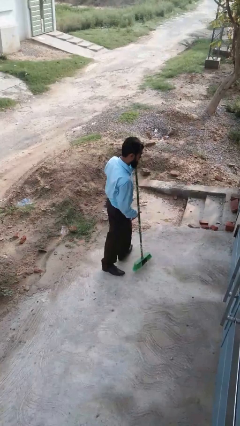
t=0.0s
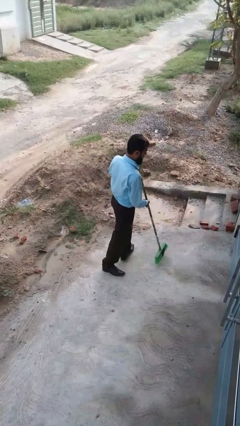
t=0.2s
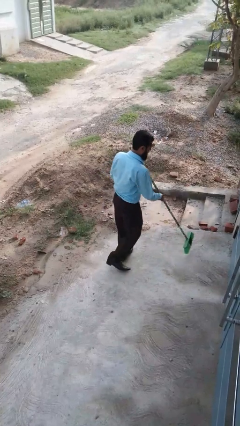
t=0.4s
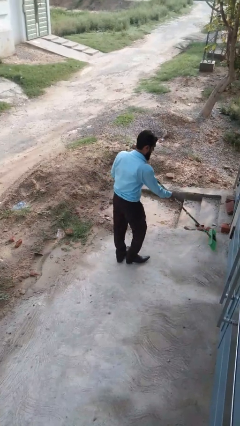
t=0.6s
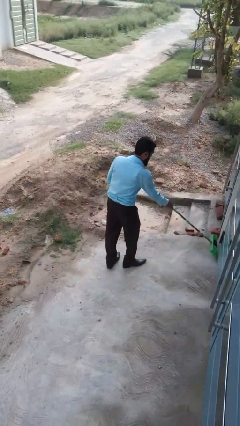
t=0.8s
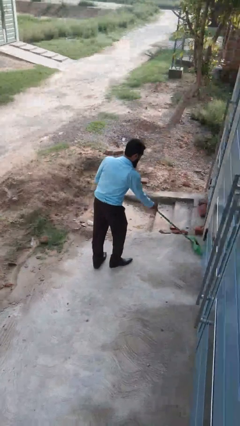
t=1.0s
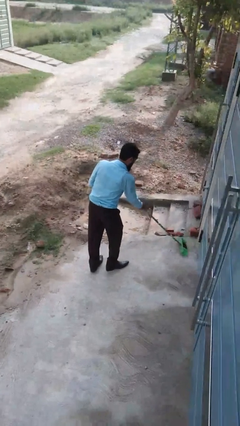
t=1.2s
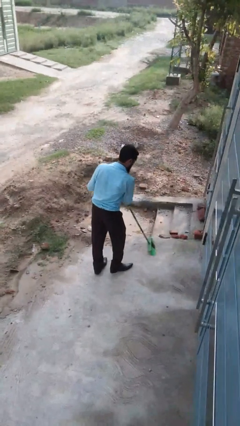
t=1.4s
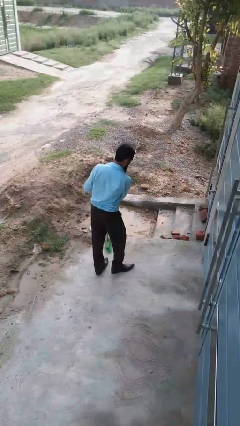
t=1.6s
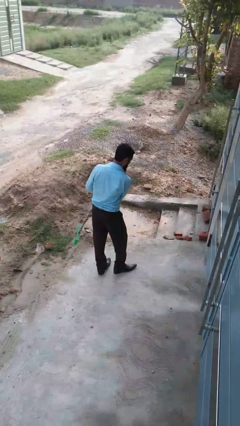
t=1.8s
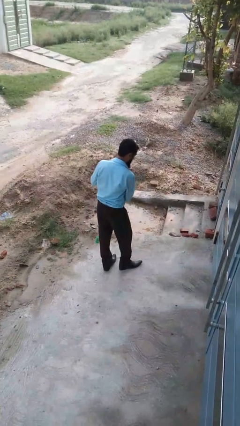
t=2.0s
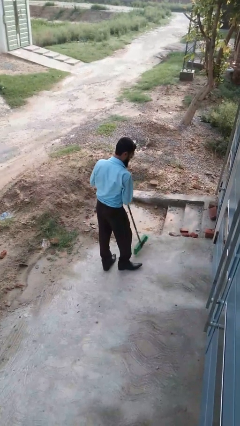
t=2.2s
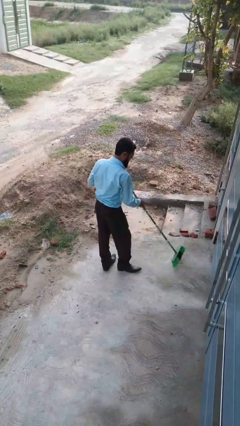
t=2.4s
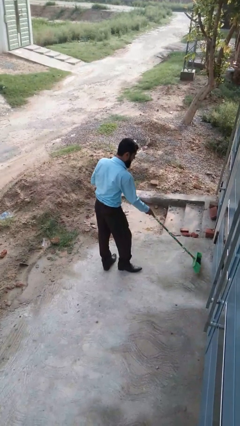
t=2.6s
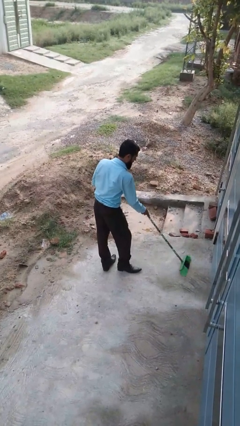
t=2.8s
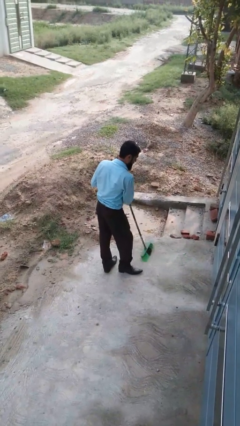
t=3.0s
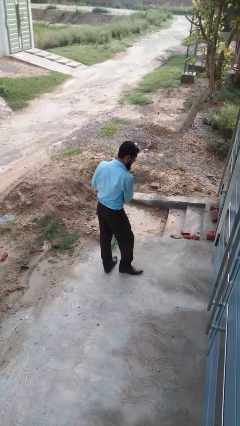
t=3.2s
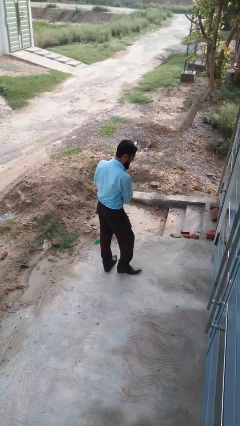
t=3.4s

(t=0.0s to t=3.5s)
person sweeps floor

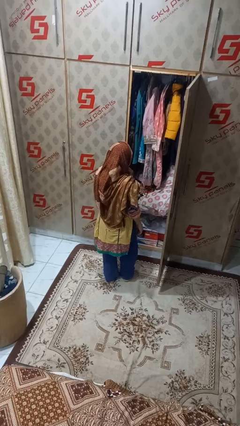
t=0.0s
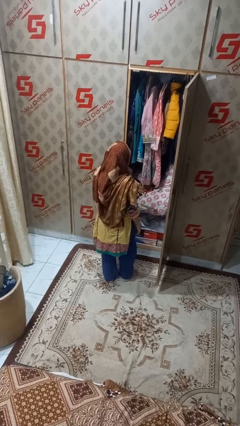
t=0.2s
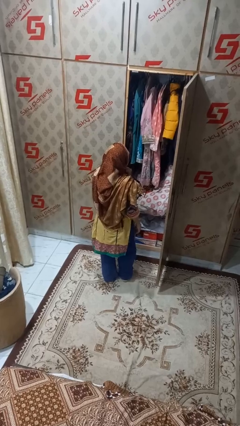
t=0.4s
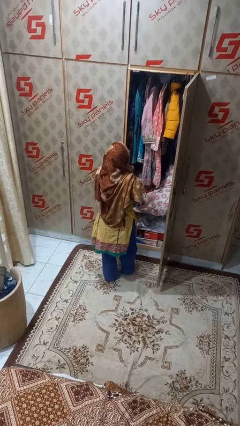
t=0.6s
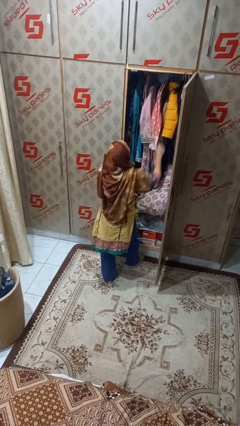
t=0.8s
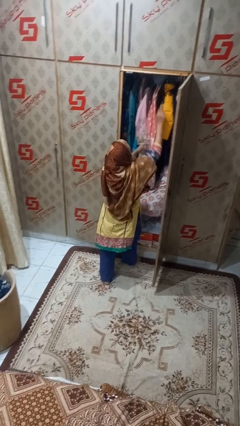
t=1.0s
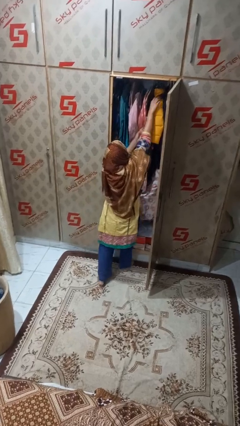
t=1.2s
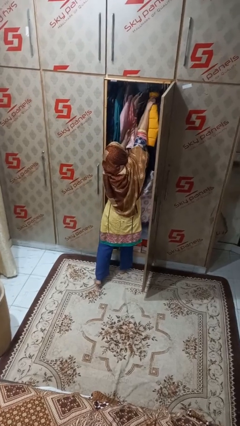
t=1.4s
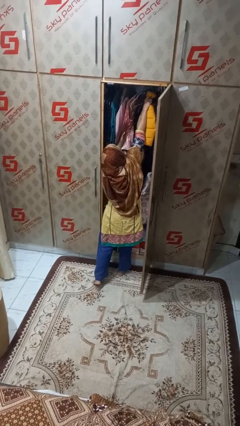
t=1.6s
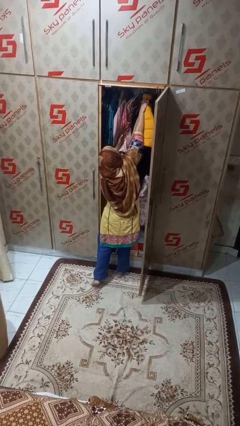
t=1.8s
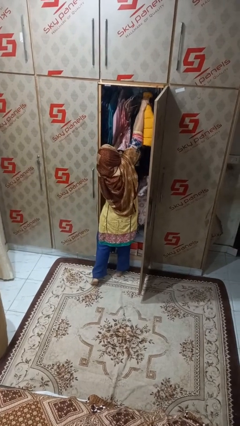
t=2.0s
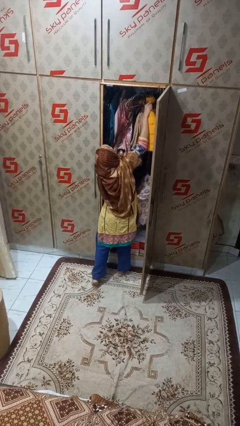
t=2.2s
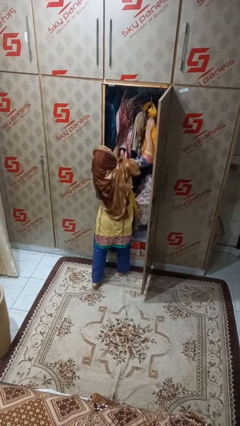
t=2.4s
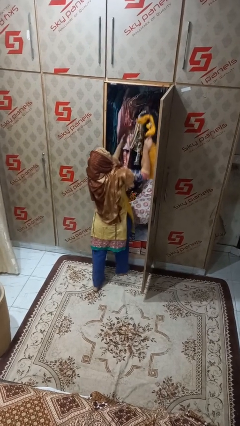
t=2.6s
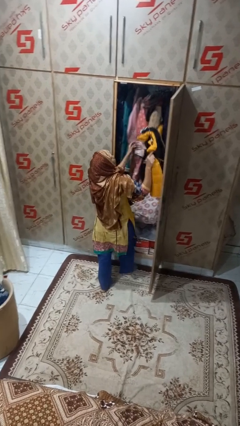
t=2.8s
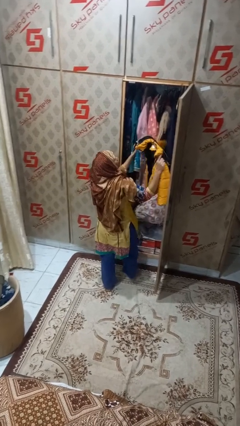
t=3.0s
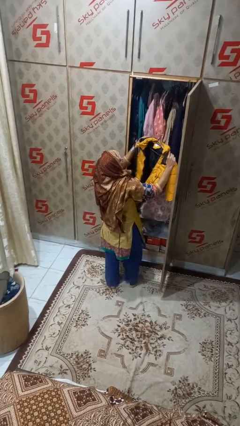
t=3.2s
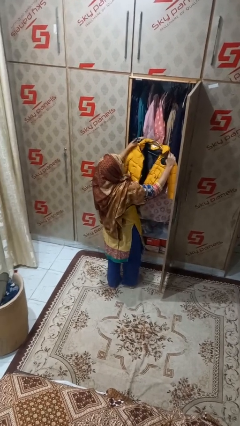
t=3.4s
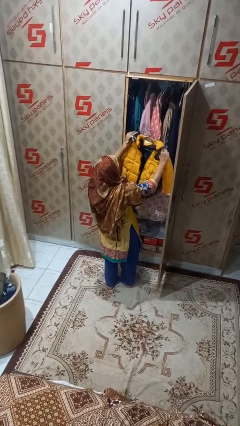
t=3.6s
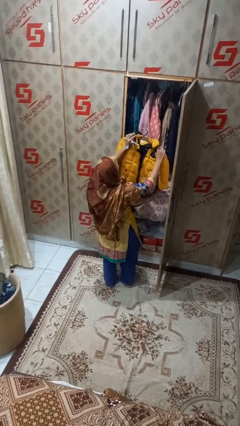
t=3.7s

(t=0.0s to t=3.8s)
person takes clothes from closet

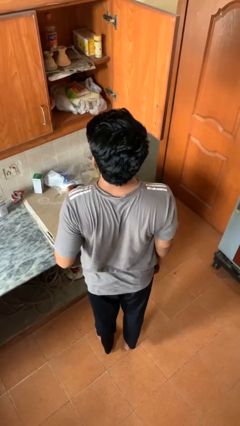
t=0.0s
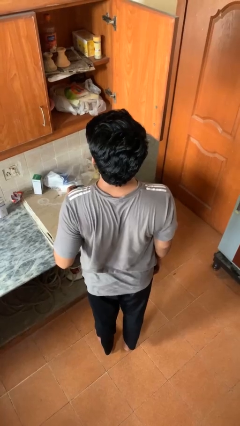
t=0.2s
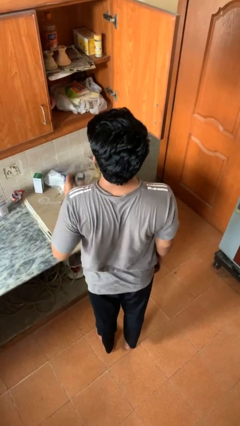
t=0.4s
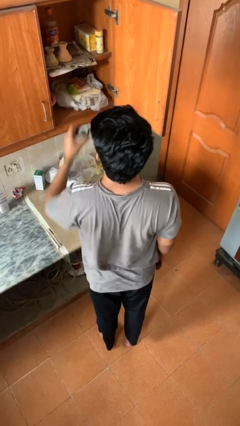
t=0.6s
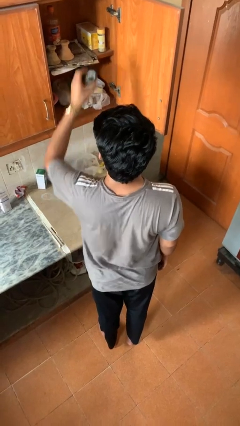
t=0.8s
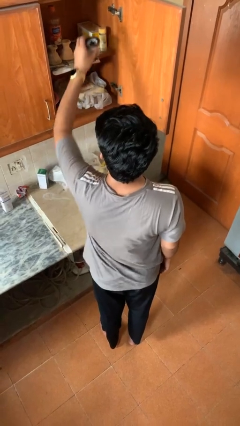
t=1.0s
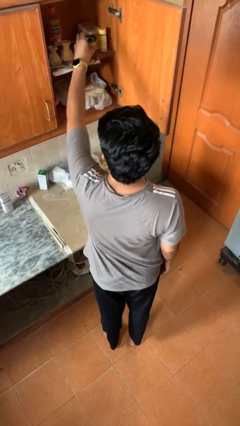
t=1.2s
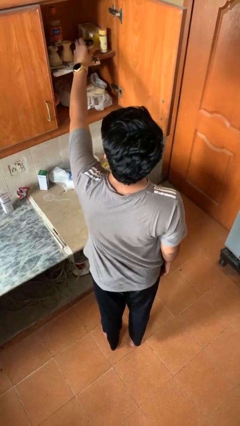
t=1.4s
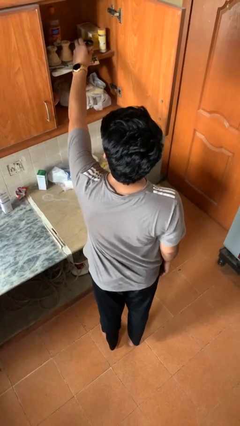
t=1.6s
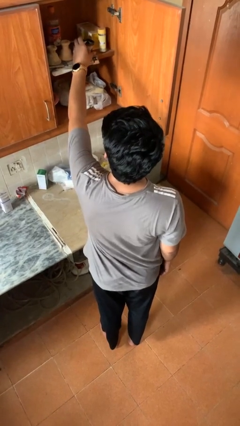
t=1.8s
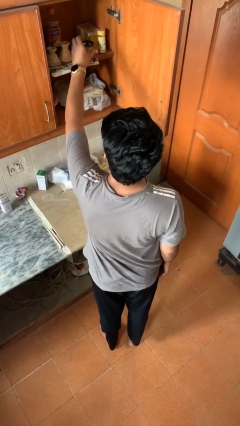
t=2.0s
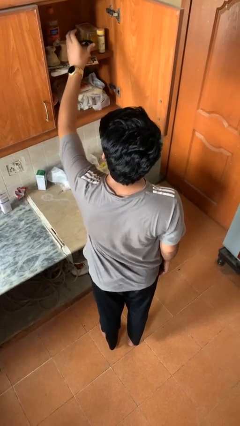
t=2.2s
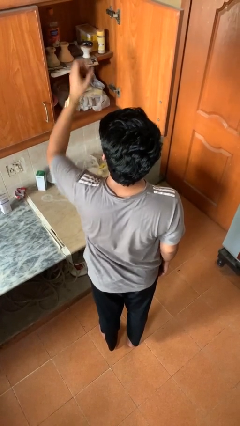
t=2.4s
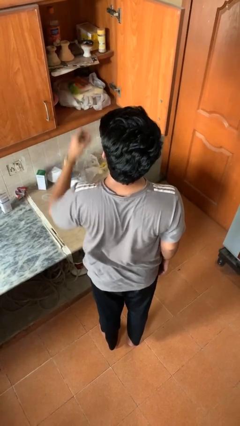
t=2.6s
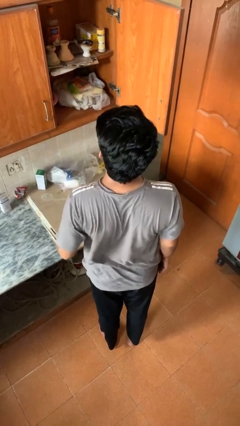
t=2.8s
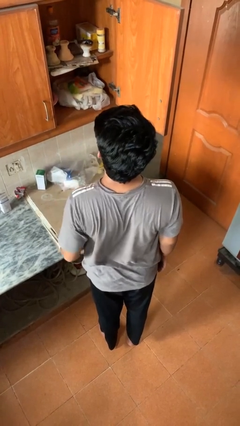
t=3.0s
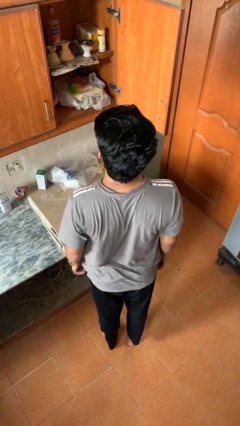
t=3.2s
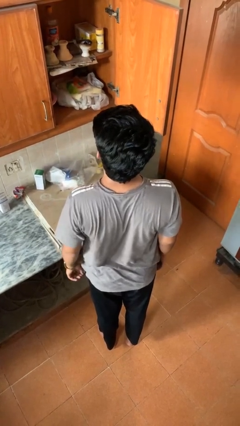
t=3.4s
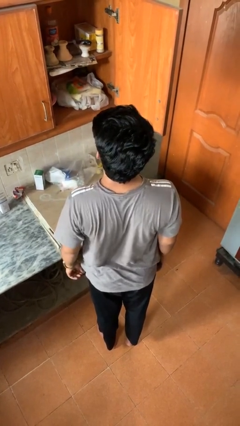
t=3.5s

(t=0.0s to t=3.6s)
person puts object in cabinet

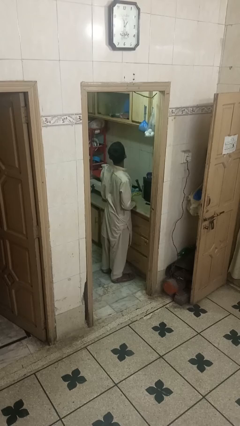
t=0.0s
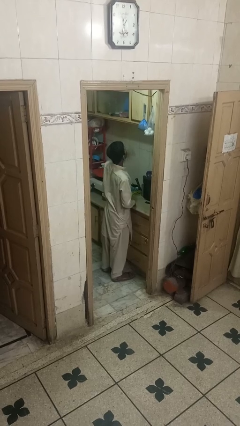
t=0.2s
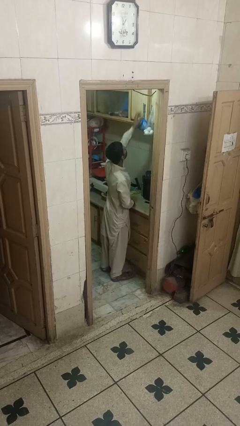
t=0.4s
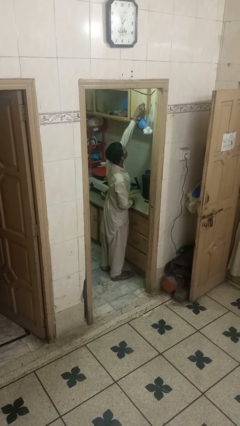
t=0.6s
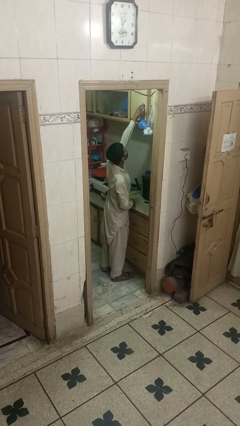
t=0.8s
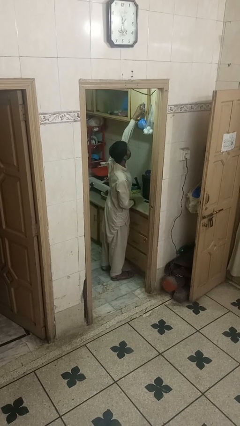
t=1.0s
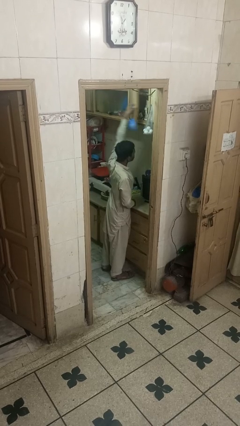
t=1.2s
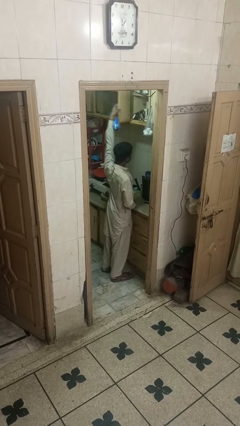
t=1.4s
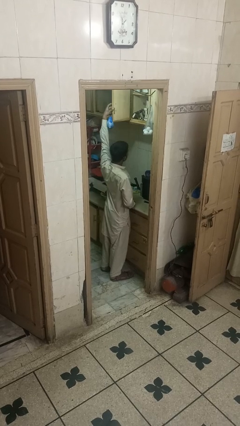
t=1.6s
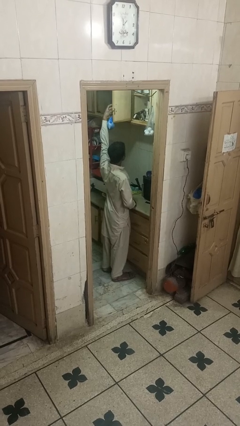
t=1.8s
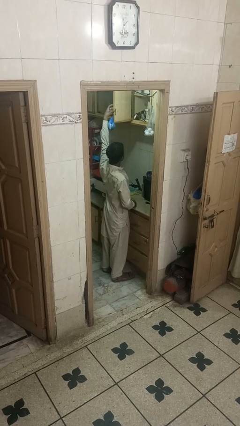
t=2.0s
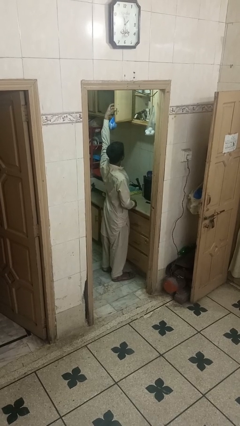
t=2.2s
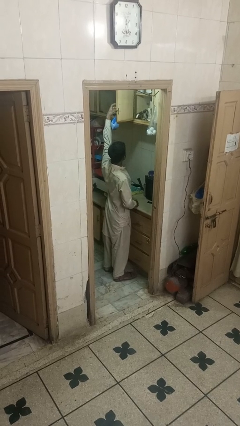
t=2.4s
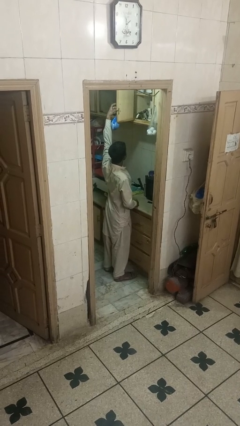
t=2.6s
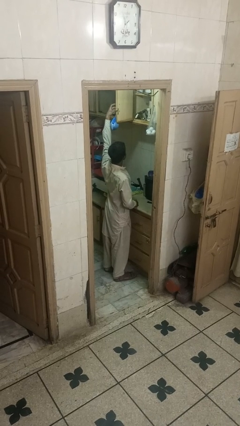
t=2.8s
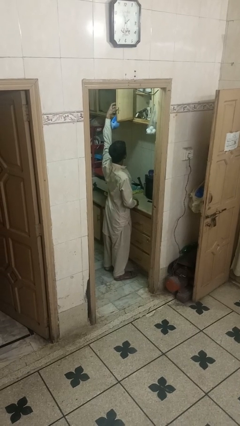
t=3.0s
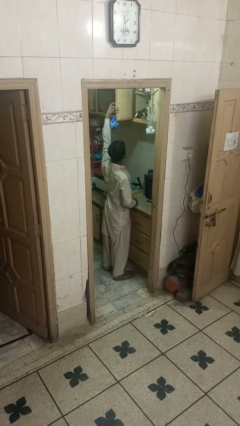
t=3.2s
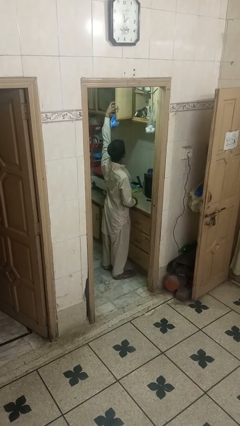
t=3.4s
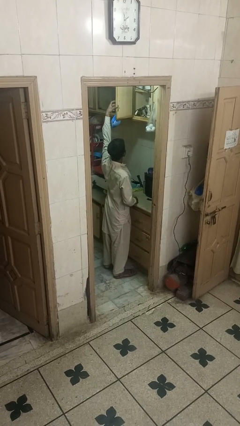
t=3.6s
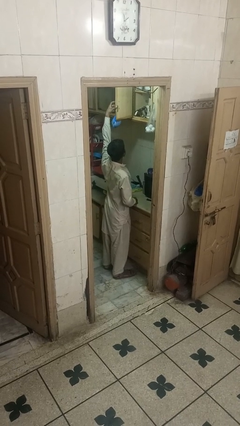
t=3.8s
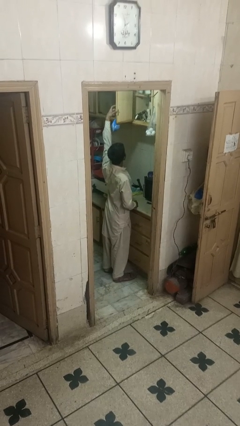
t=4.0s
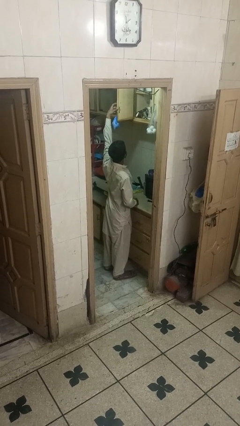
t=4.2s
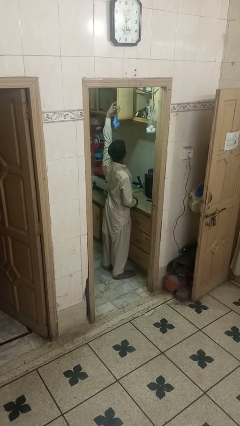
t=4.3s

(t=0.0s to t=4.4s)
person opens cabinet

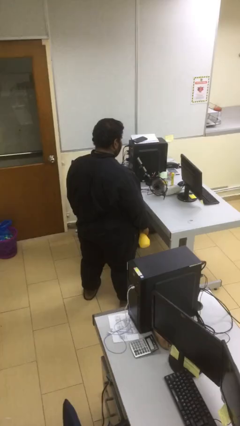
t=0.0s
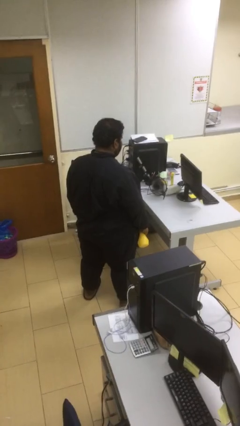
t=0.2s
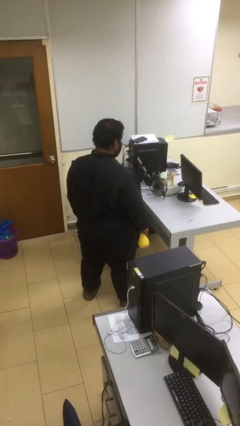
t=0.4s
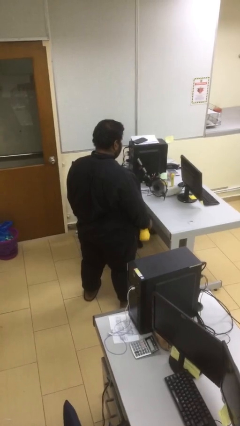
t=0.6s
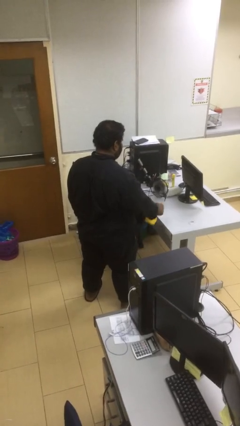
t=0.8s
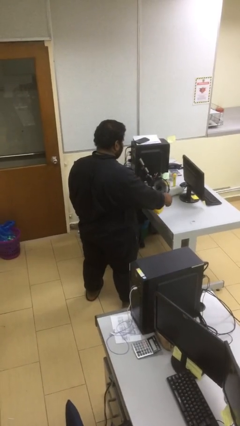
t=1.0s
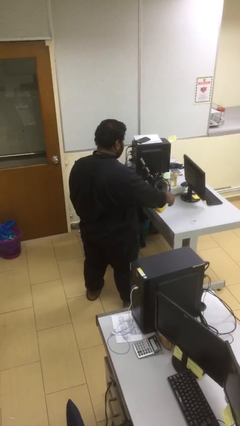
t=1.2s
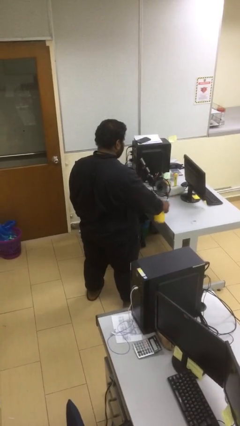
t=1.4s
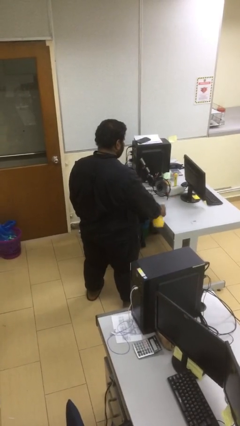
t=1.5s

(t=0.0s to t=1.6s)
person sprays from bottle

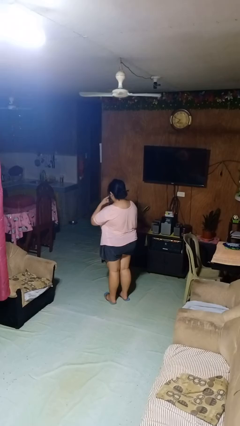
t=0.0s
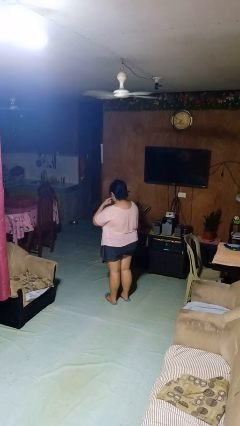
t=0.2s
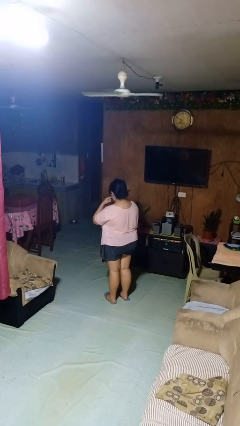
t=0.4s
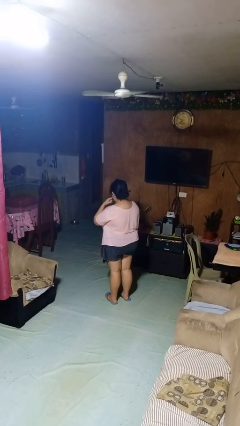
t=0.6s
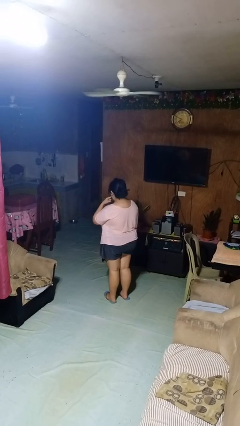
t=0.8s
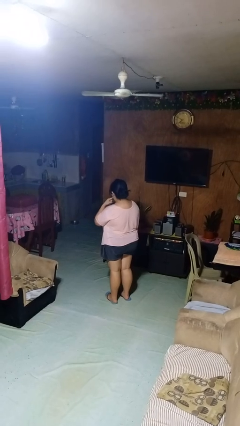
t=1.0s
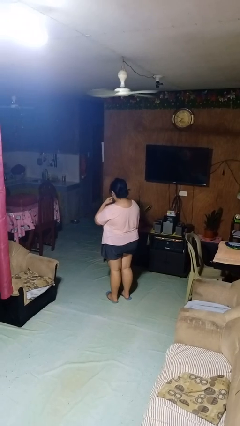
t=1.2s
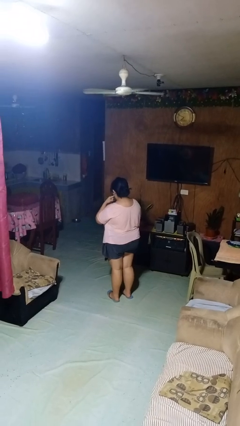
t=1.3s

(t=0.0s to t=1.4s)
person licks fingers
